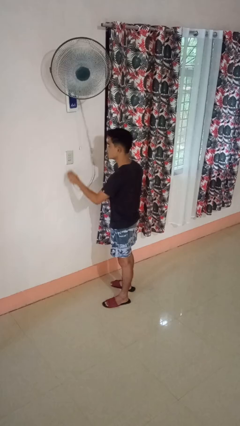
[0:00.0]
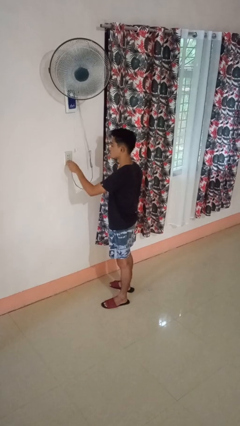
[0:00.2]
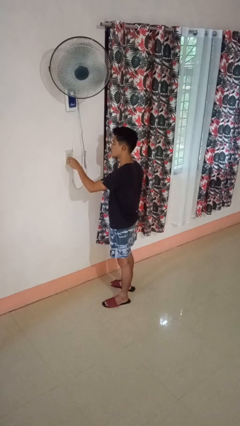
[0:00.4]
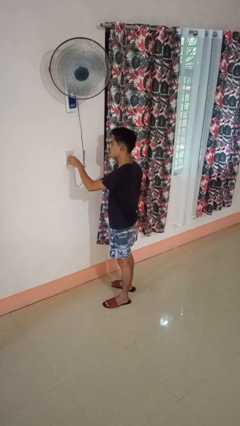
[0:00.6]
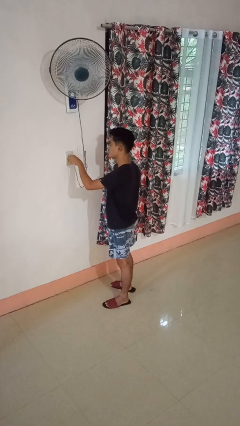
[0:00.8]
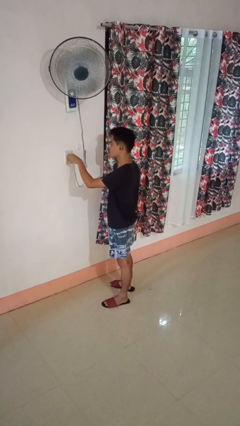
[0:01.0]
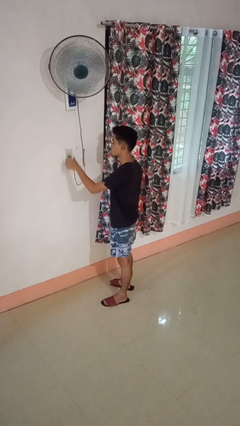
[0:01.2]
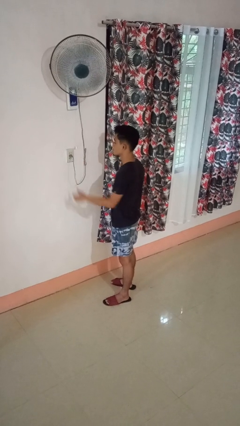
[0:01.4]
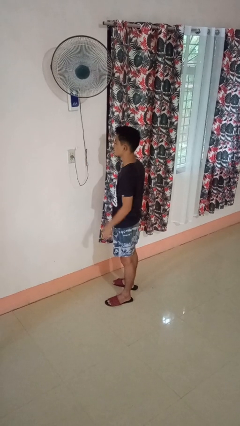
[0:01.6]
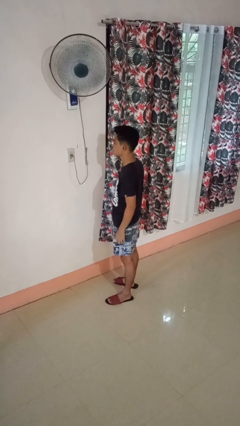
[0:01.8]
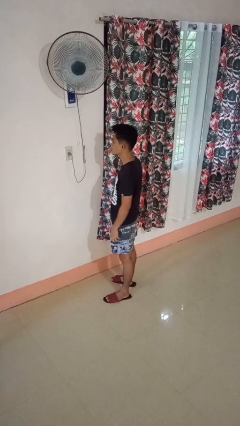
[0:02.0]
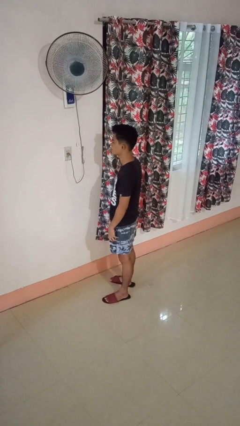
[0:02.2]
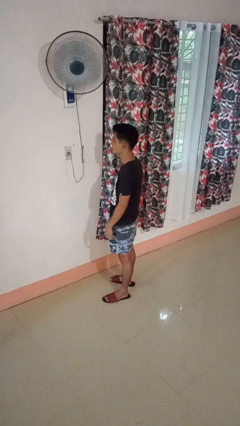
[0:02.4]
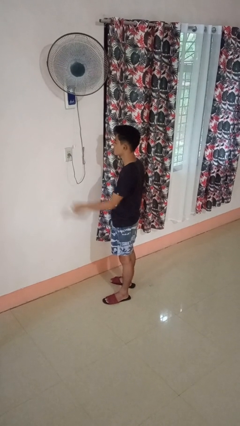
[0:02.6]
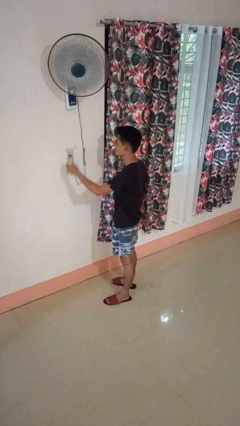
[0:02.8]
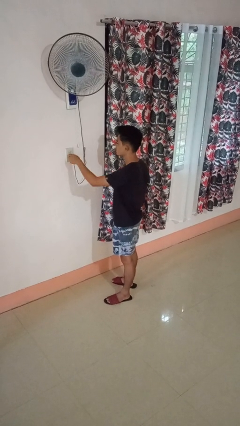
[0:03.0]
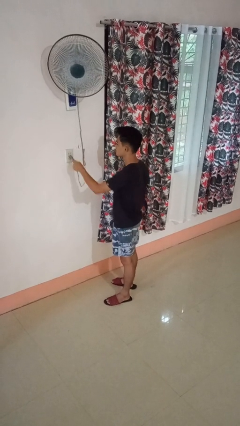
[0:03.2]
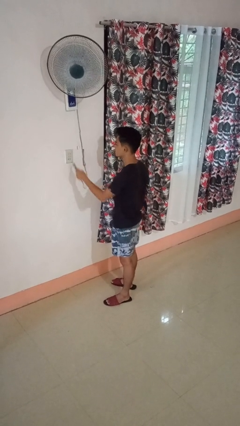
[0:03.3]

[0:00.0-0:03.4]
person plugs into electrical socket

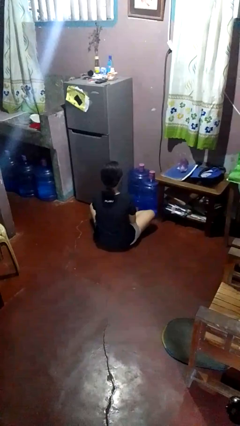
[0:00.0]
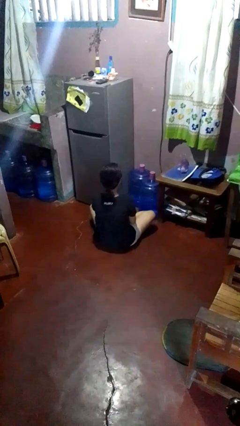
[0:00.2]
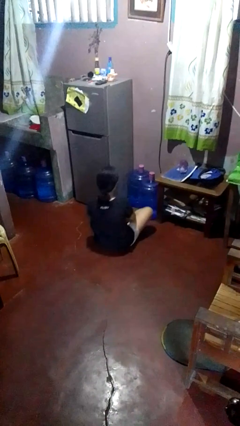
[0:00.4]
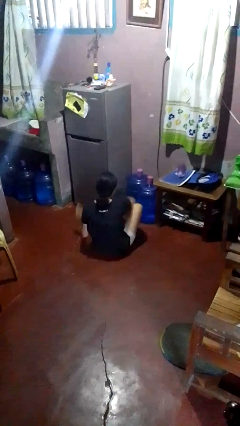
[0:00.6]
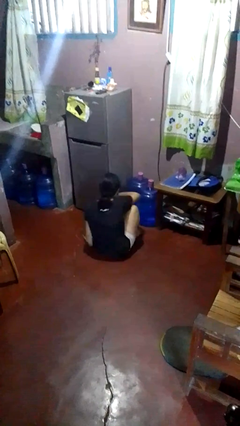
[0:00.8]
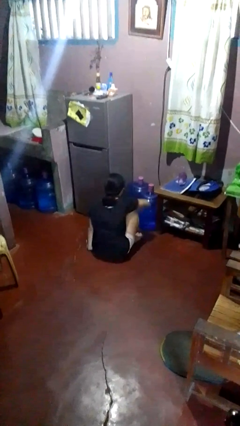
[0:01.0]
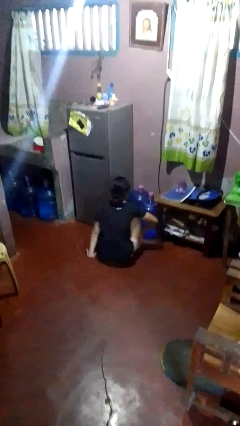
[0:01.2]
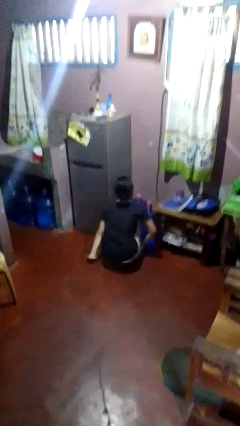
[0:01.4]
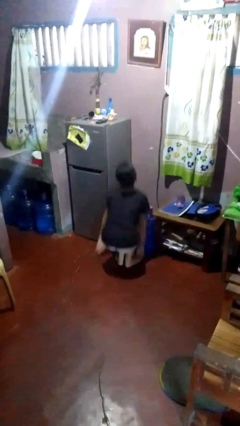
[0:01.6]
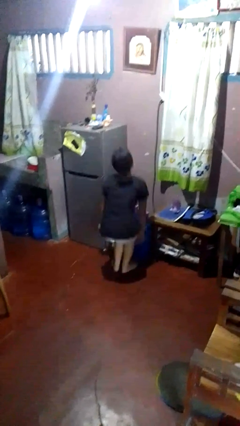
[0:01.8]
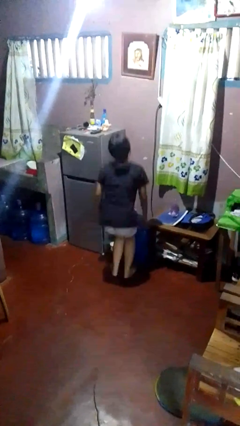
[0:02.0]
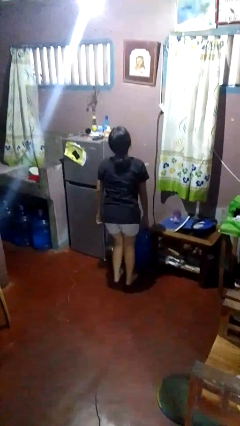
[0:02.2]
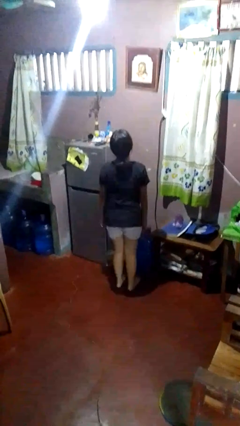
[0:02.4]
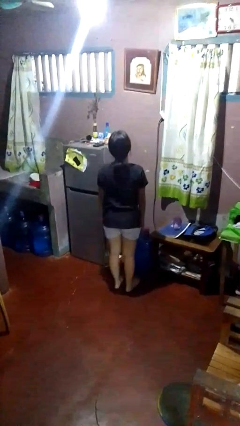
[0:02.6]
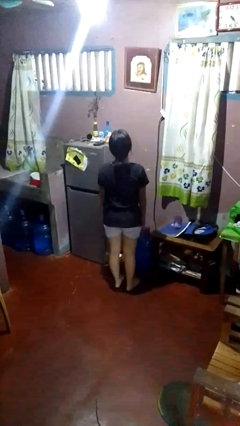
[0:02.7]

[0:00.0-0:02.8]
person stands up from floor

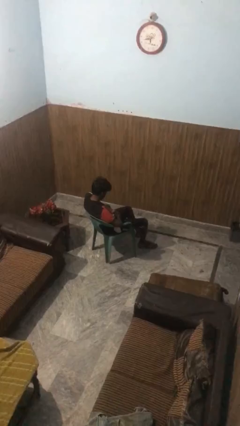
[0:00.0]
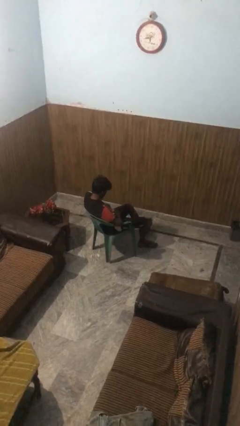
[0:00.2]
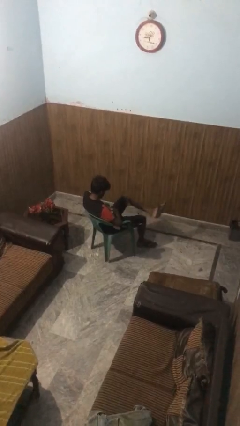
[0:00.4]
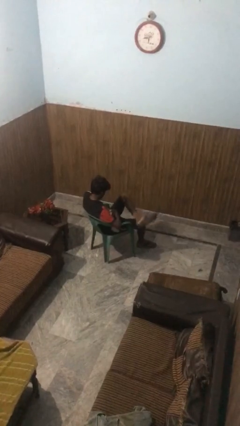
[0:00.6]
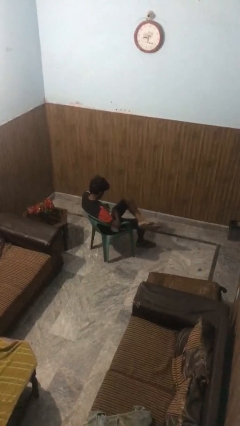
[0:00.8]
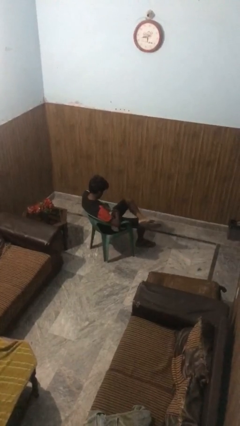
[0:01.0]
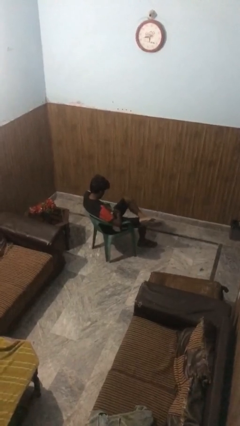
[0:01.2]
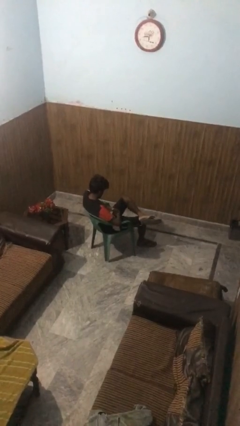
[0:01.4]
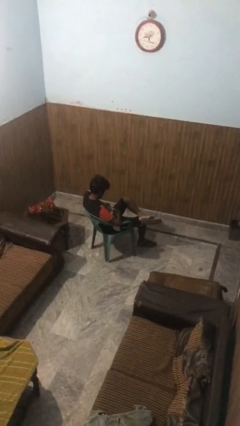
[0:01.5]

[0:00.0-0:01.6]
person crosses legs

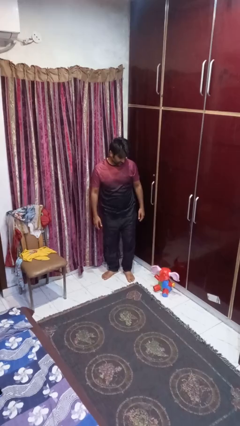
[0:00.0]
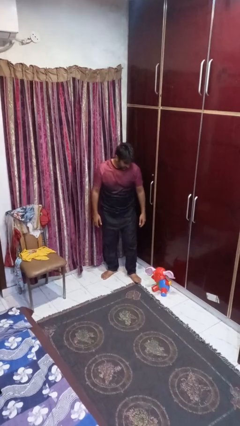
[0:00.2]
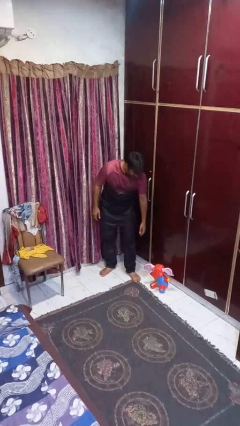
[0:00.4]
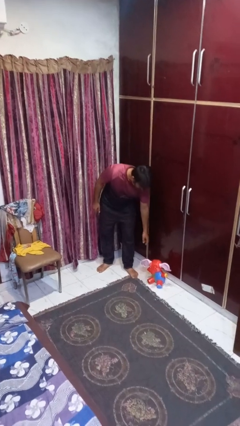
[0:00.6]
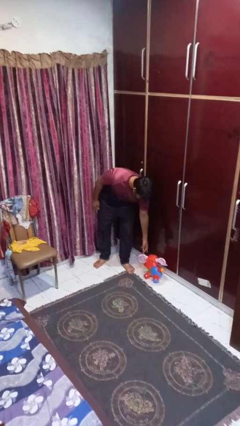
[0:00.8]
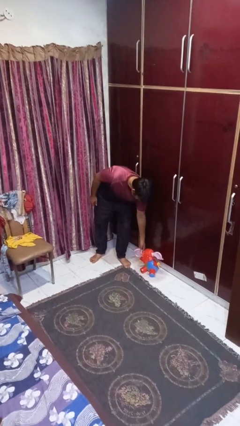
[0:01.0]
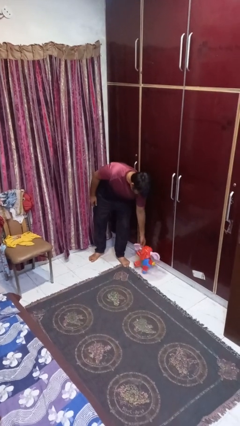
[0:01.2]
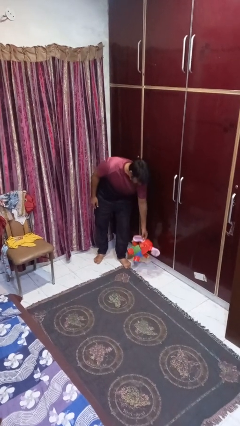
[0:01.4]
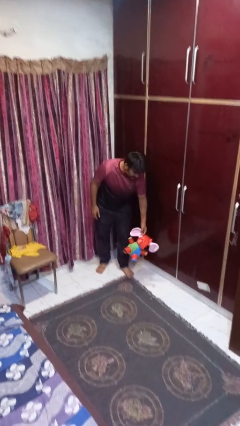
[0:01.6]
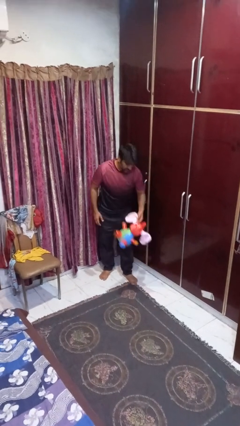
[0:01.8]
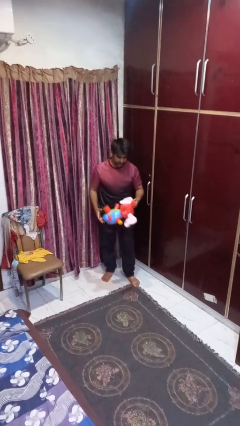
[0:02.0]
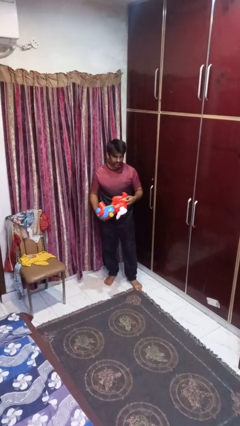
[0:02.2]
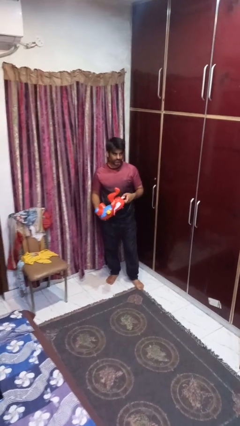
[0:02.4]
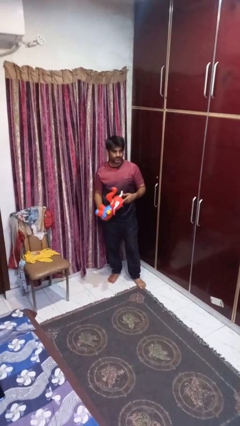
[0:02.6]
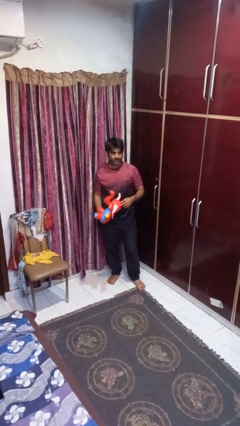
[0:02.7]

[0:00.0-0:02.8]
person picks up object from floor

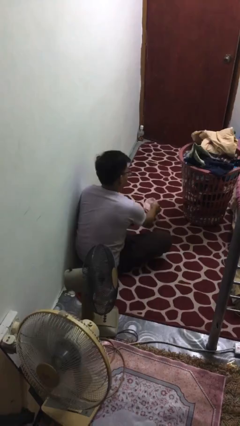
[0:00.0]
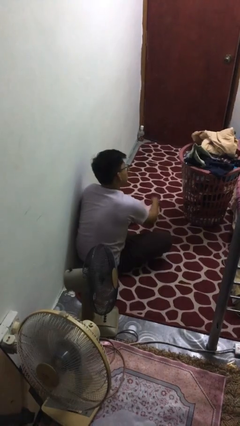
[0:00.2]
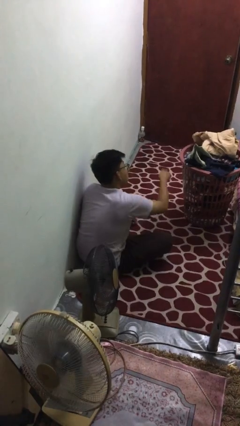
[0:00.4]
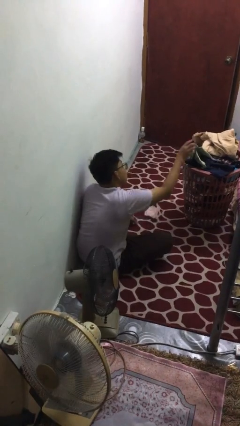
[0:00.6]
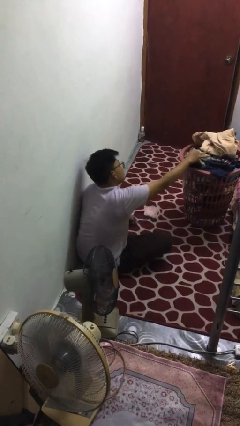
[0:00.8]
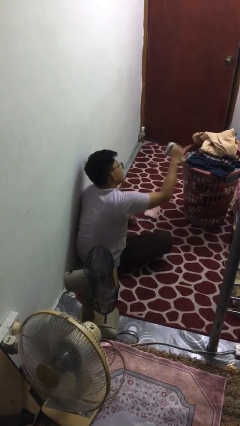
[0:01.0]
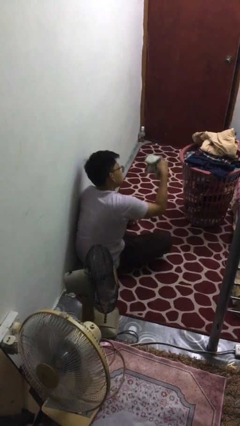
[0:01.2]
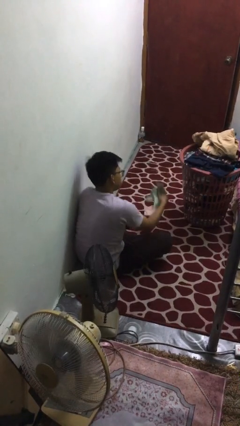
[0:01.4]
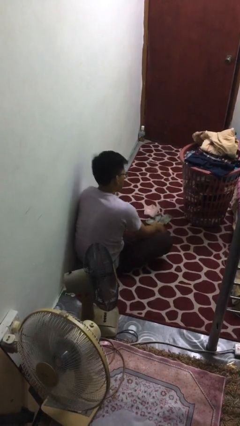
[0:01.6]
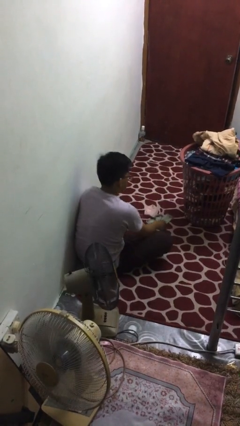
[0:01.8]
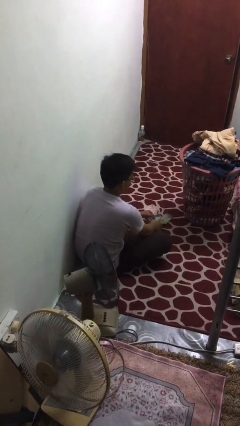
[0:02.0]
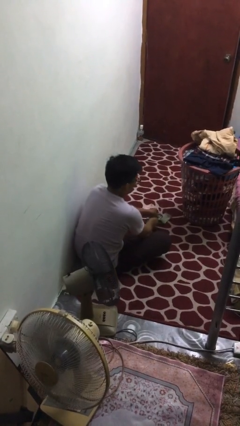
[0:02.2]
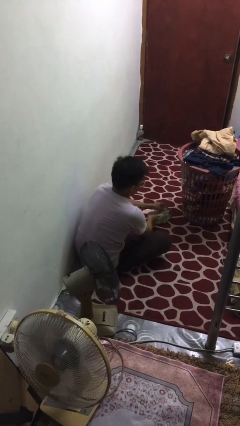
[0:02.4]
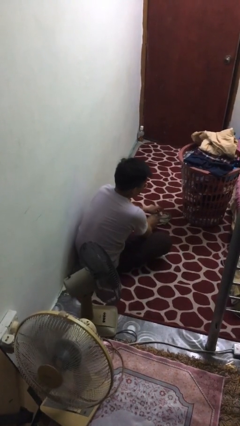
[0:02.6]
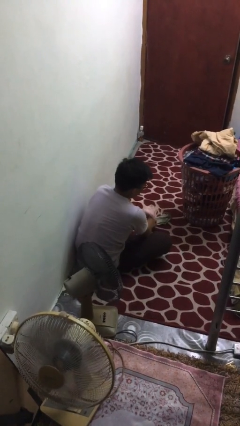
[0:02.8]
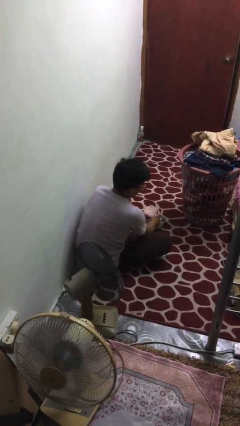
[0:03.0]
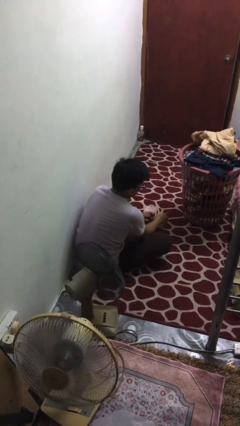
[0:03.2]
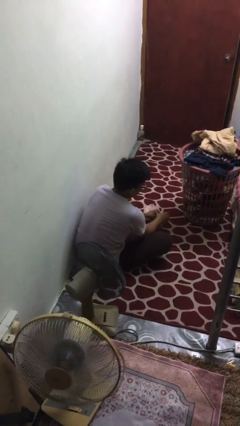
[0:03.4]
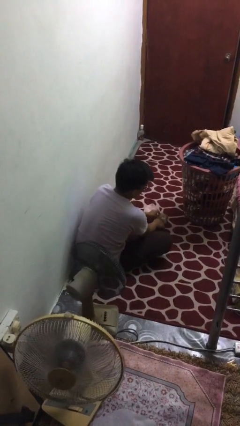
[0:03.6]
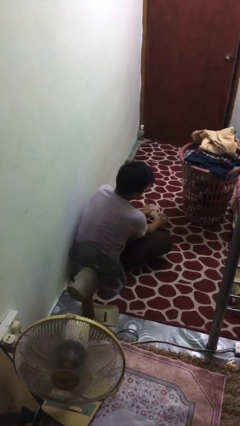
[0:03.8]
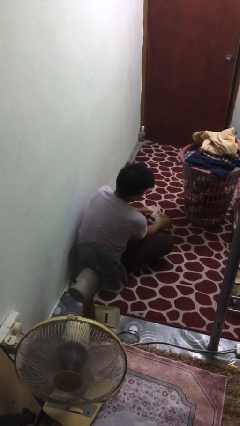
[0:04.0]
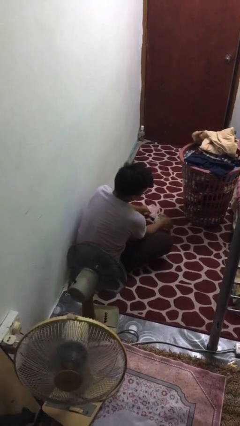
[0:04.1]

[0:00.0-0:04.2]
person folds socks

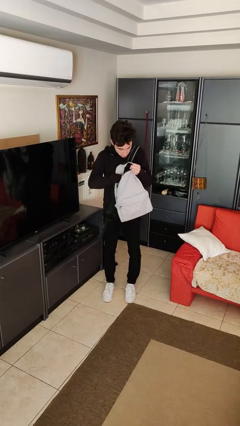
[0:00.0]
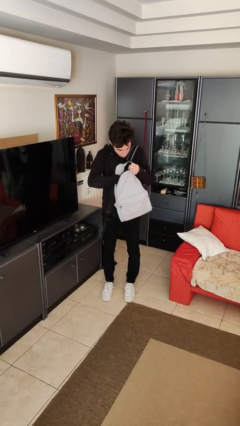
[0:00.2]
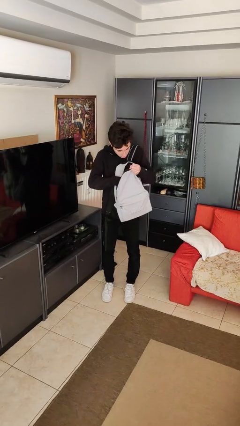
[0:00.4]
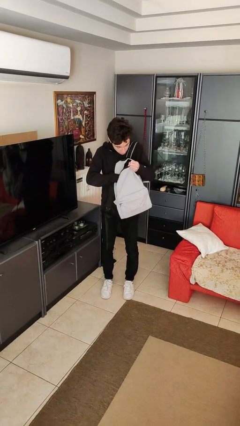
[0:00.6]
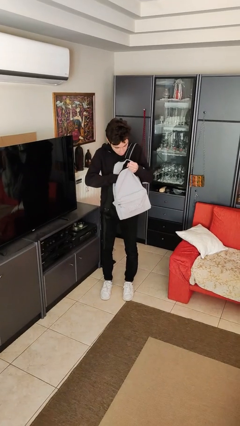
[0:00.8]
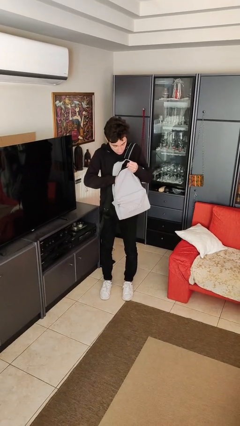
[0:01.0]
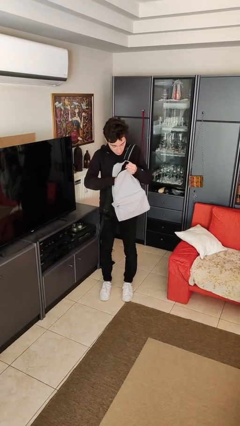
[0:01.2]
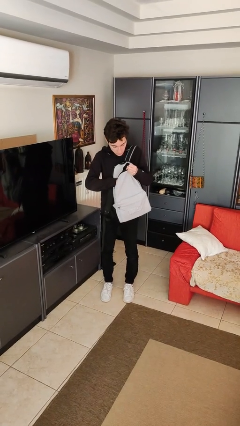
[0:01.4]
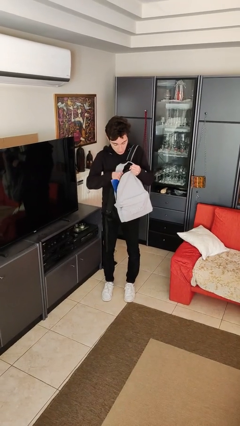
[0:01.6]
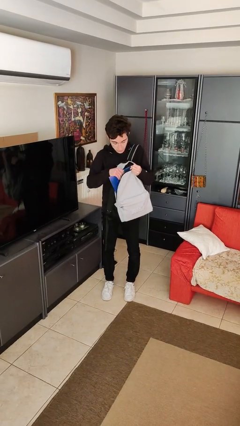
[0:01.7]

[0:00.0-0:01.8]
person searches in backpack

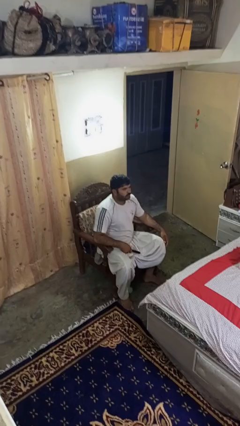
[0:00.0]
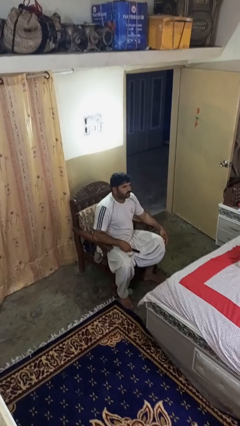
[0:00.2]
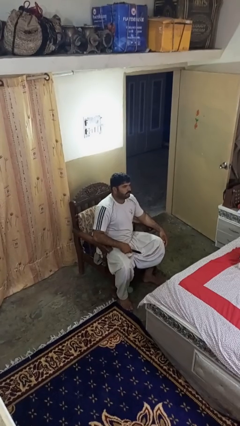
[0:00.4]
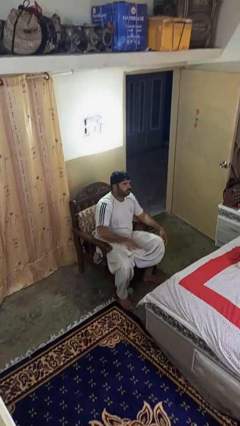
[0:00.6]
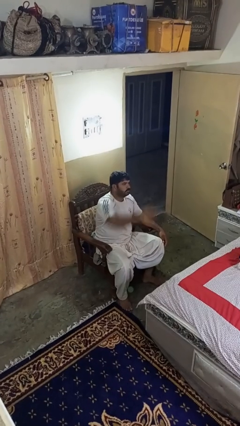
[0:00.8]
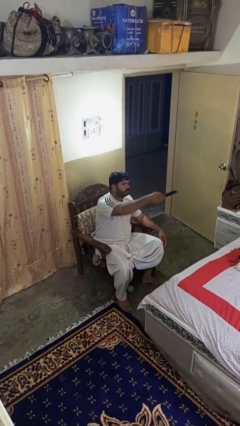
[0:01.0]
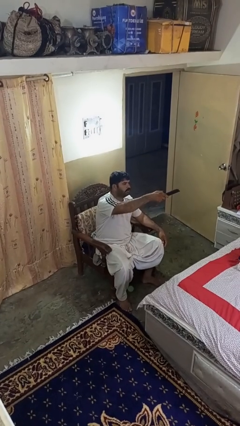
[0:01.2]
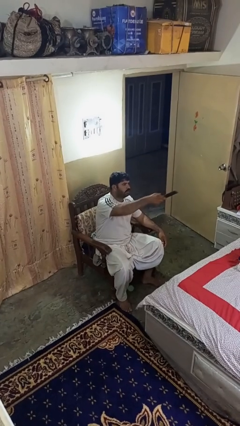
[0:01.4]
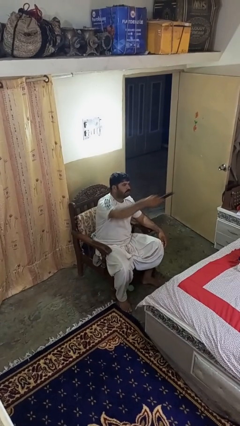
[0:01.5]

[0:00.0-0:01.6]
person uses television remote
